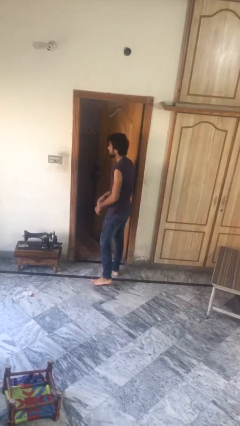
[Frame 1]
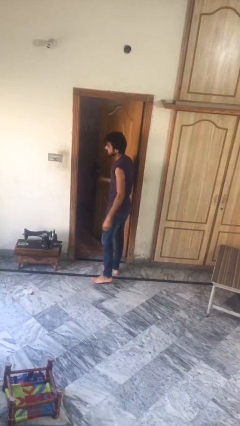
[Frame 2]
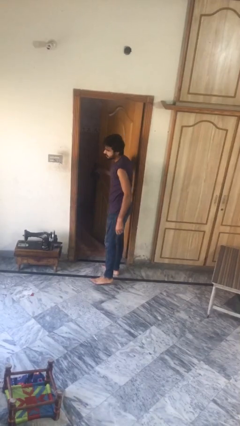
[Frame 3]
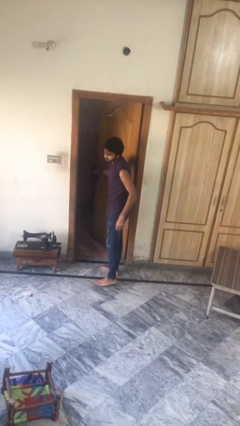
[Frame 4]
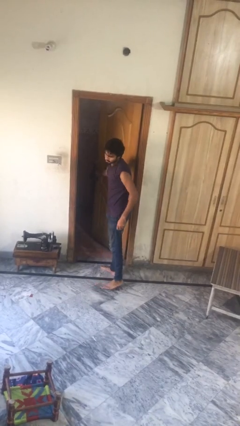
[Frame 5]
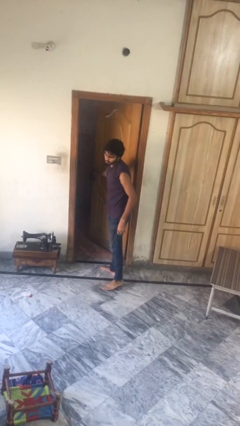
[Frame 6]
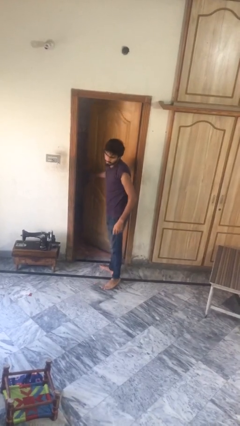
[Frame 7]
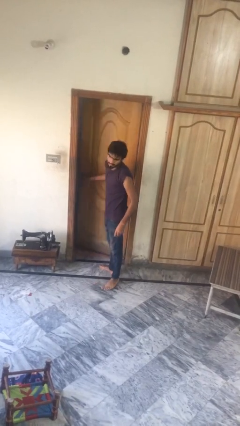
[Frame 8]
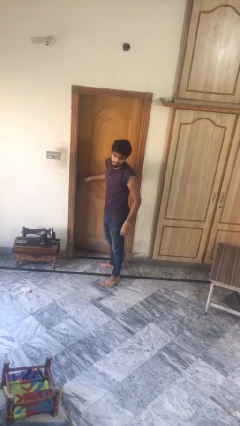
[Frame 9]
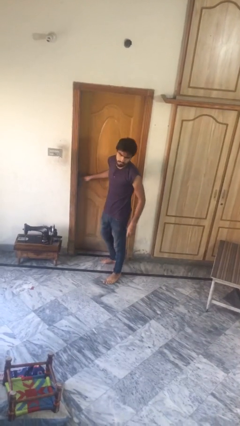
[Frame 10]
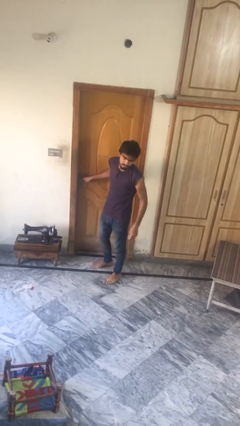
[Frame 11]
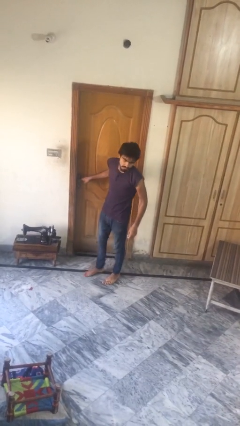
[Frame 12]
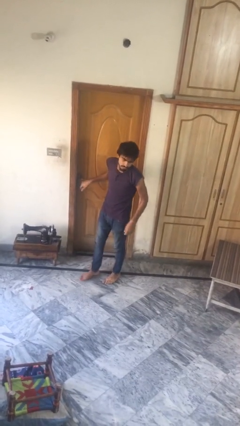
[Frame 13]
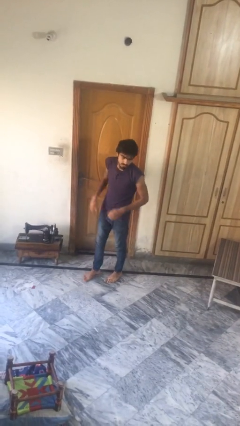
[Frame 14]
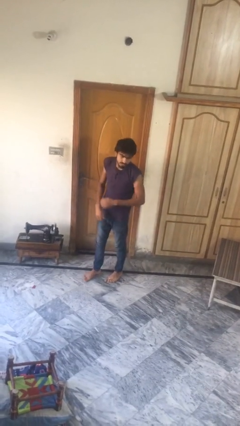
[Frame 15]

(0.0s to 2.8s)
person closes facility door

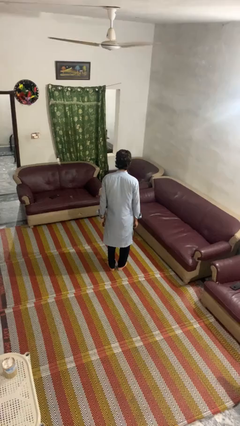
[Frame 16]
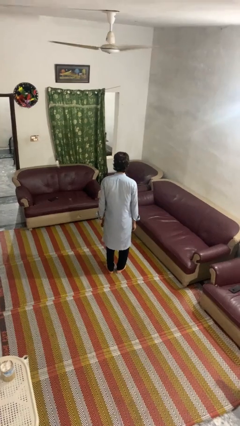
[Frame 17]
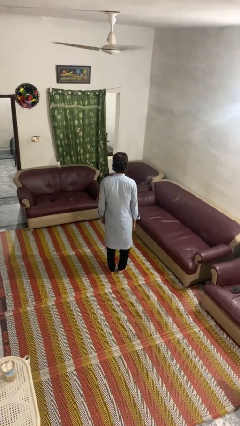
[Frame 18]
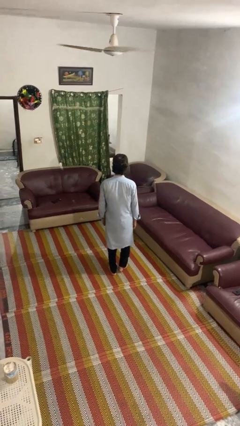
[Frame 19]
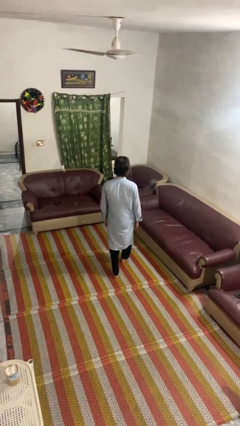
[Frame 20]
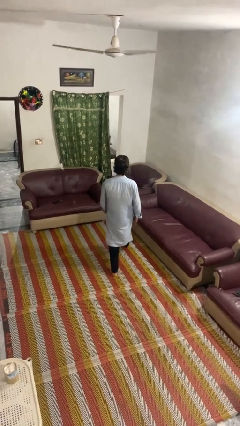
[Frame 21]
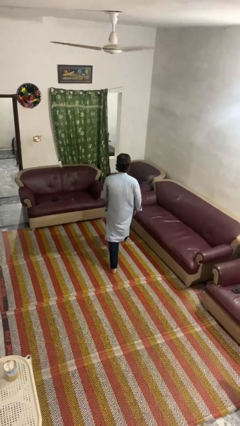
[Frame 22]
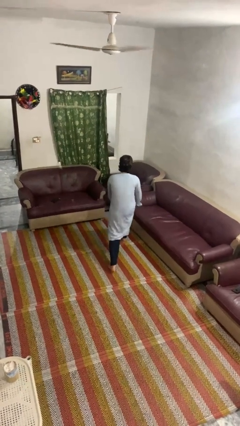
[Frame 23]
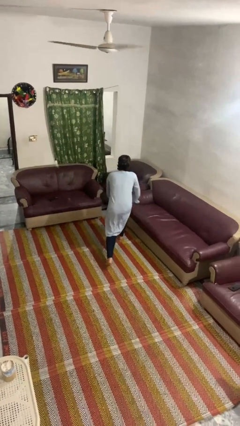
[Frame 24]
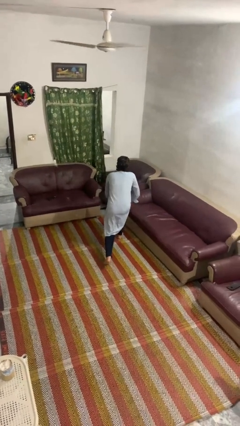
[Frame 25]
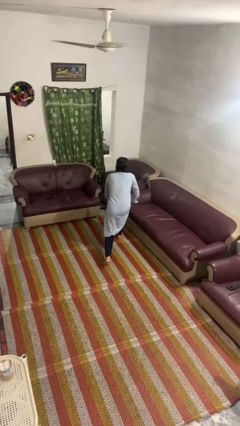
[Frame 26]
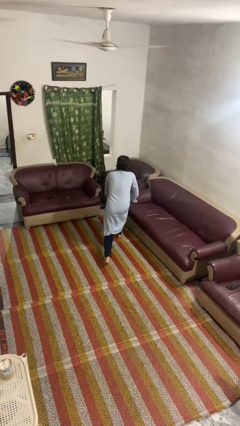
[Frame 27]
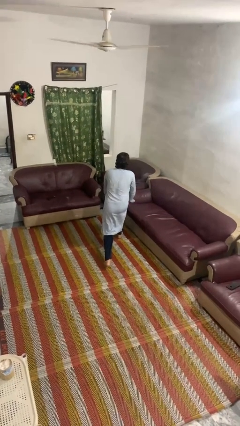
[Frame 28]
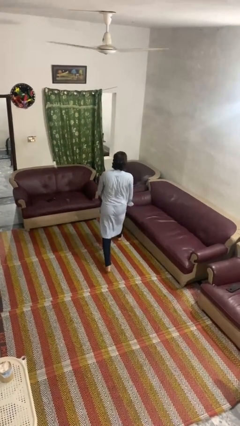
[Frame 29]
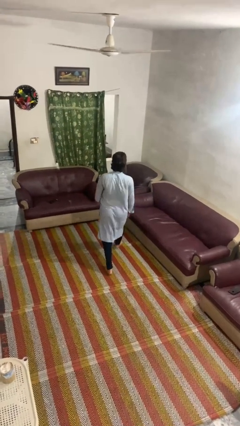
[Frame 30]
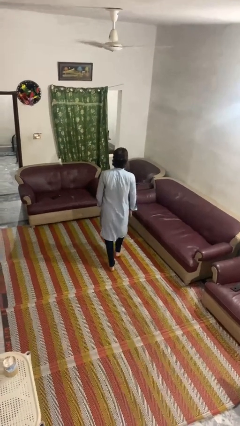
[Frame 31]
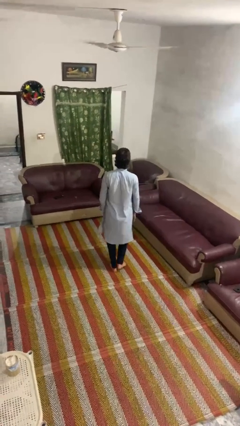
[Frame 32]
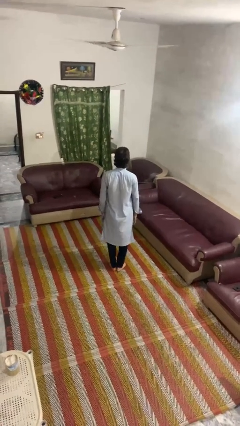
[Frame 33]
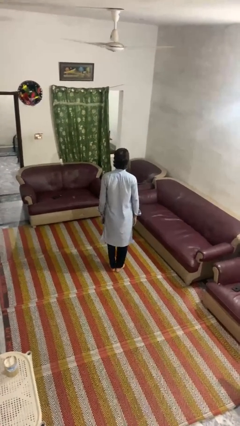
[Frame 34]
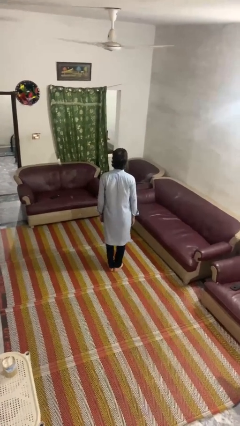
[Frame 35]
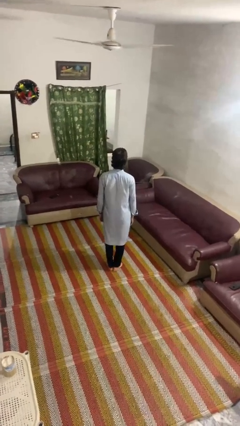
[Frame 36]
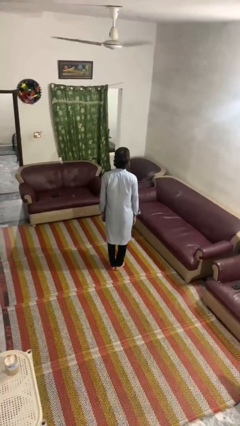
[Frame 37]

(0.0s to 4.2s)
person exercises with lunges

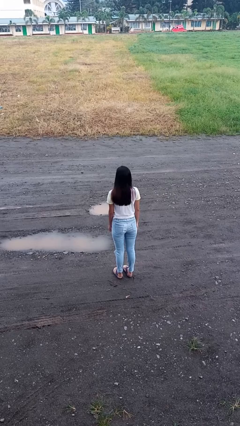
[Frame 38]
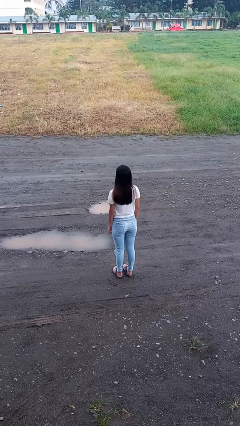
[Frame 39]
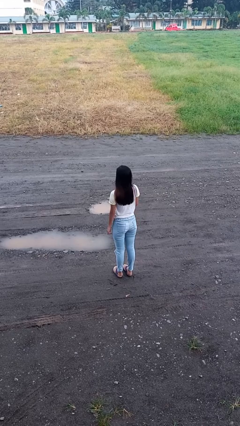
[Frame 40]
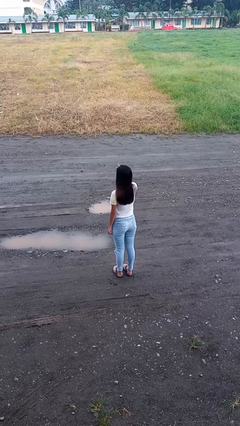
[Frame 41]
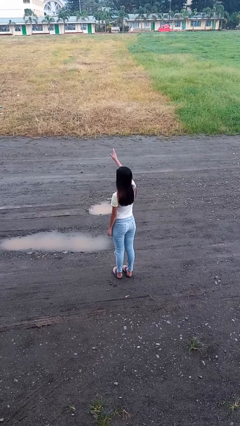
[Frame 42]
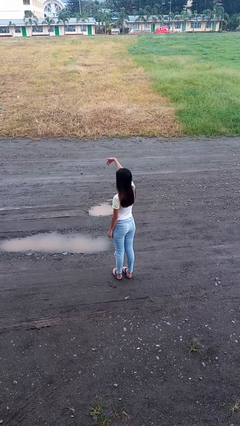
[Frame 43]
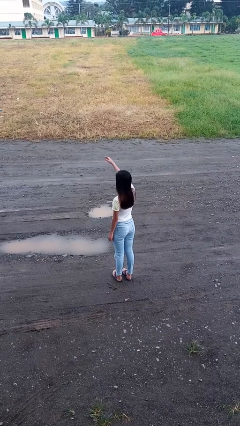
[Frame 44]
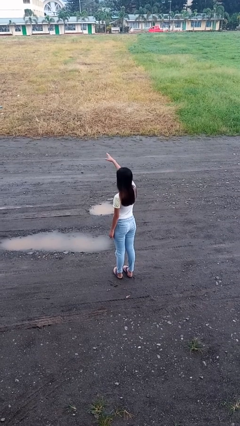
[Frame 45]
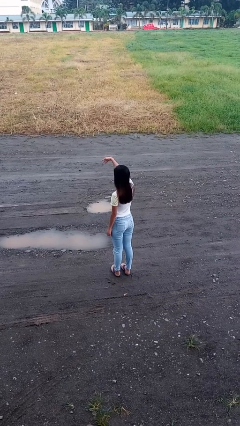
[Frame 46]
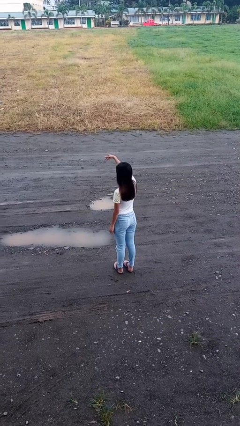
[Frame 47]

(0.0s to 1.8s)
person gestures come here

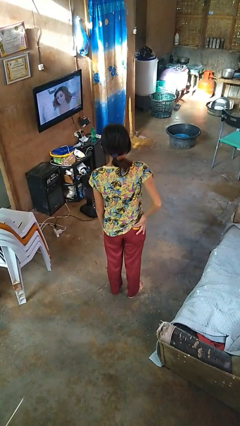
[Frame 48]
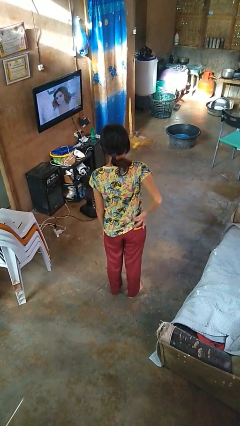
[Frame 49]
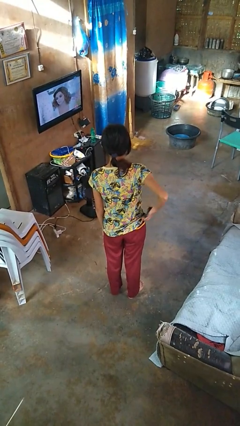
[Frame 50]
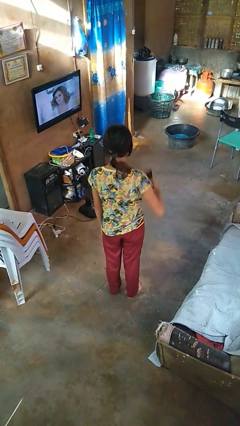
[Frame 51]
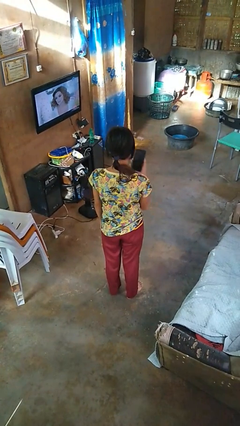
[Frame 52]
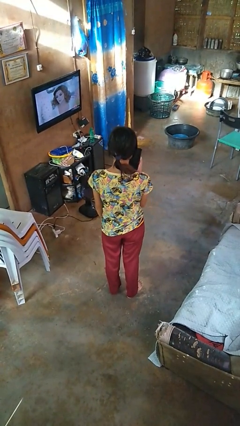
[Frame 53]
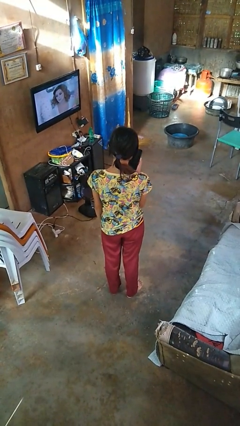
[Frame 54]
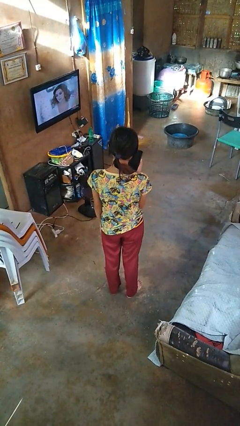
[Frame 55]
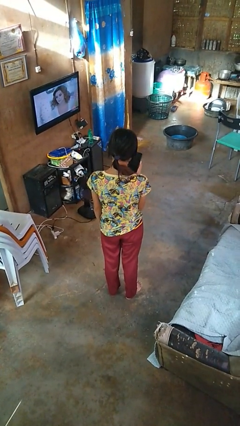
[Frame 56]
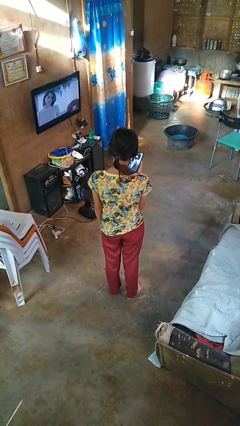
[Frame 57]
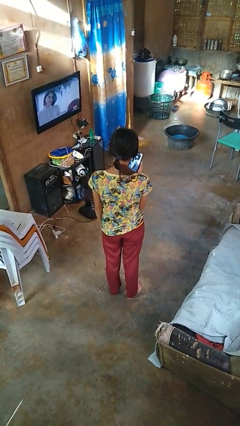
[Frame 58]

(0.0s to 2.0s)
person takes phone from pocket

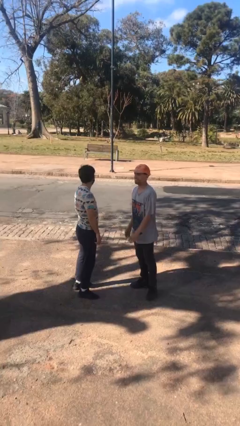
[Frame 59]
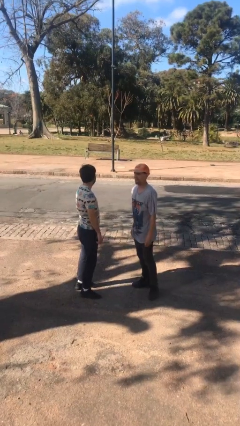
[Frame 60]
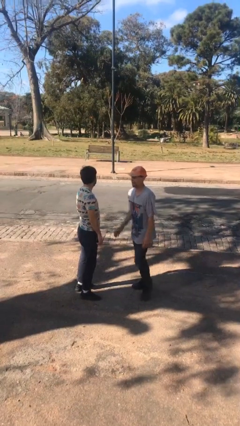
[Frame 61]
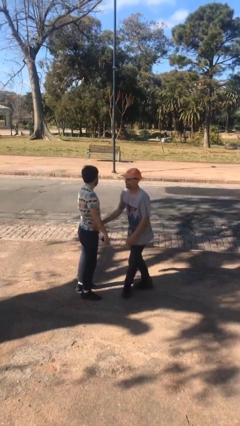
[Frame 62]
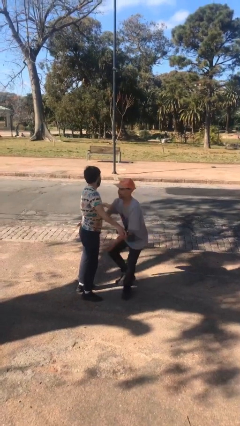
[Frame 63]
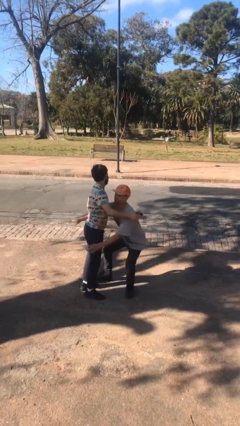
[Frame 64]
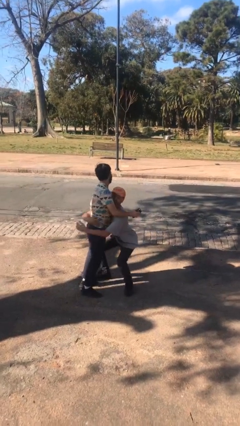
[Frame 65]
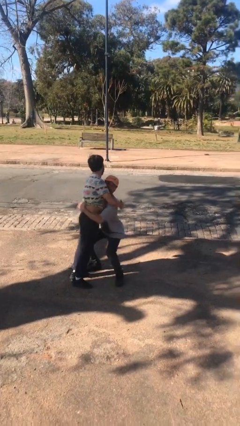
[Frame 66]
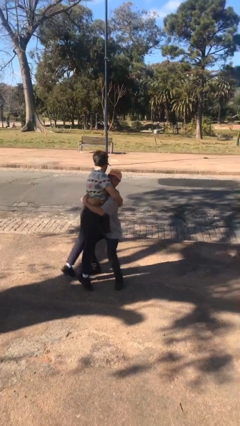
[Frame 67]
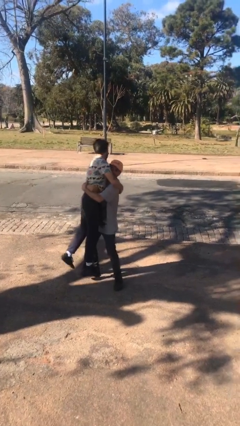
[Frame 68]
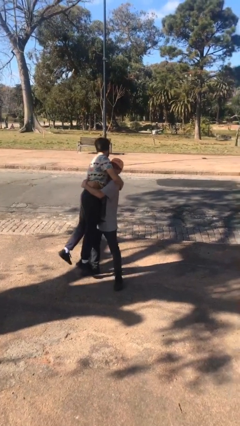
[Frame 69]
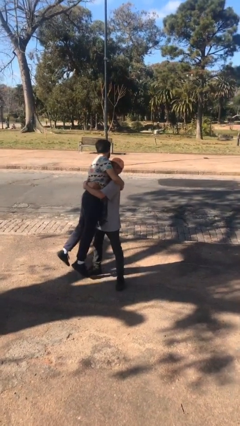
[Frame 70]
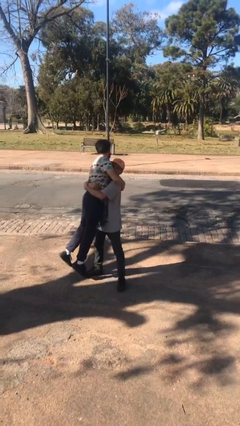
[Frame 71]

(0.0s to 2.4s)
person picks up person

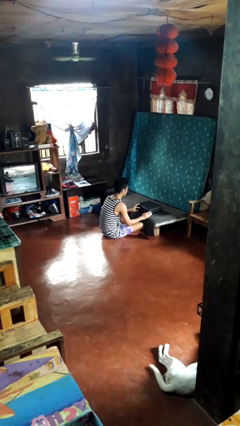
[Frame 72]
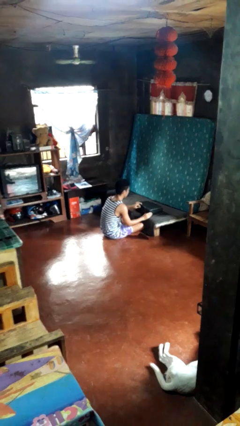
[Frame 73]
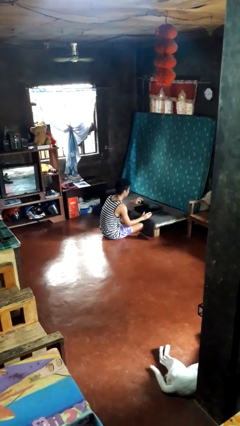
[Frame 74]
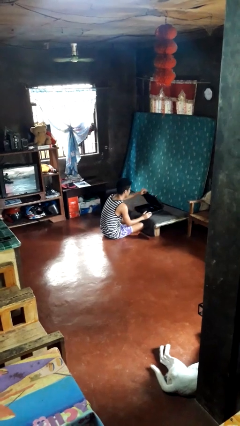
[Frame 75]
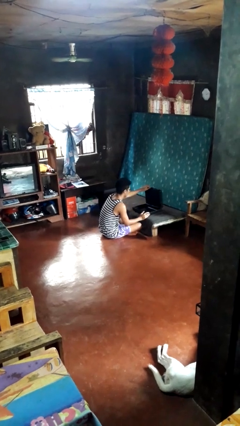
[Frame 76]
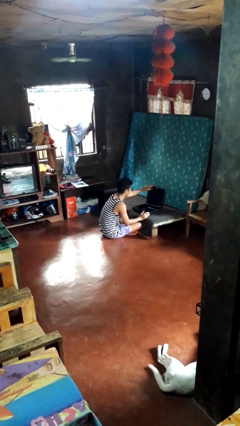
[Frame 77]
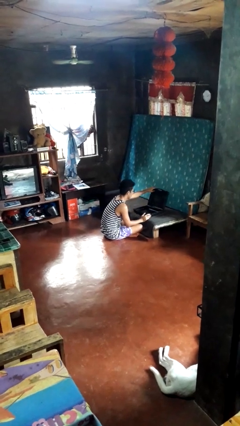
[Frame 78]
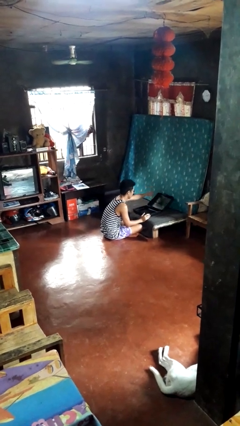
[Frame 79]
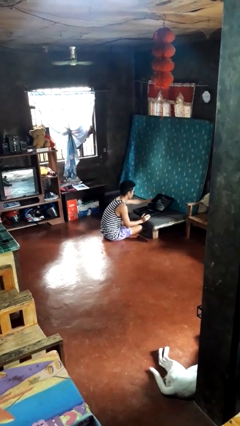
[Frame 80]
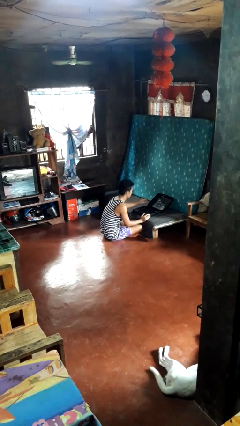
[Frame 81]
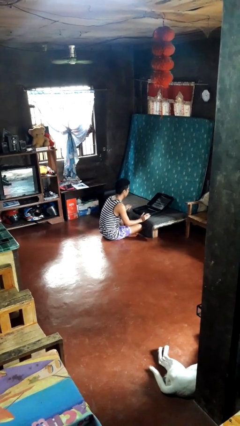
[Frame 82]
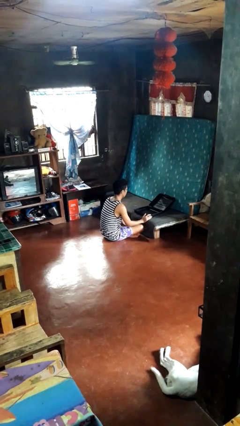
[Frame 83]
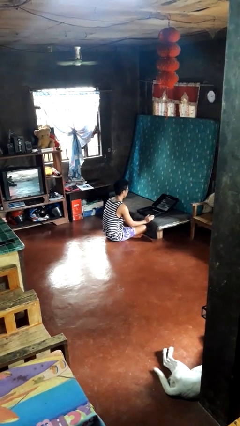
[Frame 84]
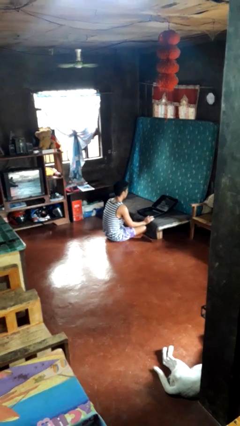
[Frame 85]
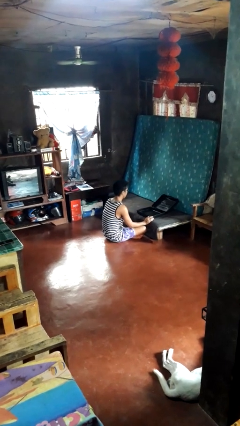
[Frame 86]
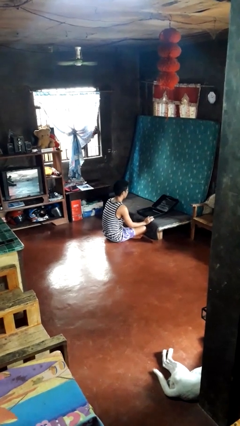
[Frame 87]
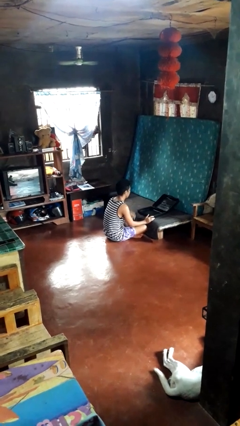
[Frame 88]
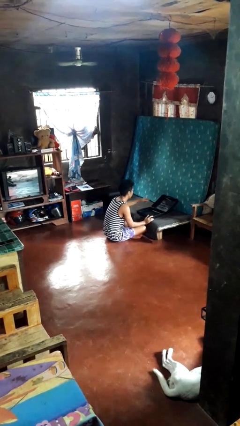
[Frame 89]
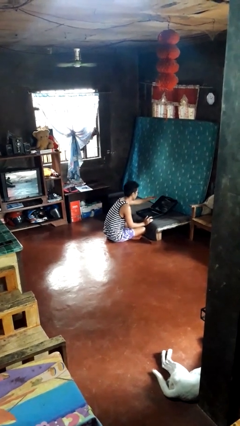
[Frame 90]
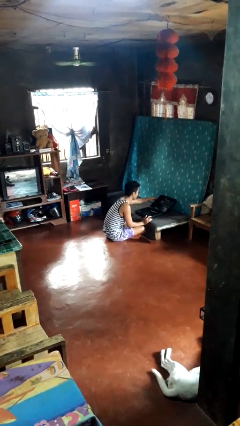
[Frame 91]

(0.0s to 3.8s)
person opens suitcase

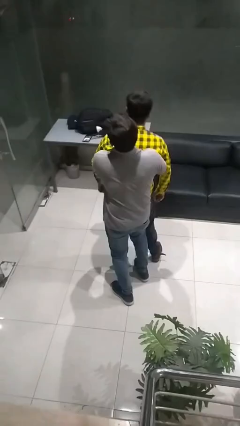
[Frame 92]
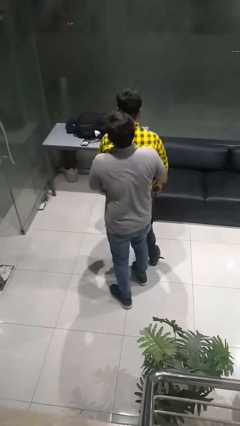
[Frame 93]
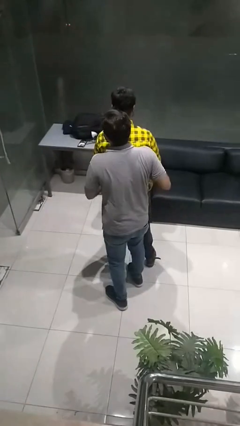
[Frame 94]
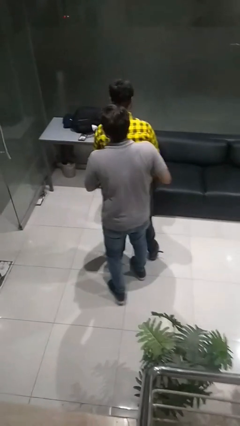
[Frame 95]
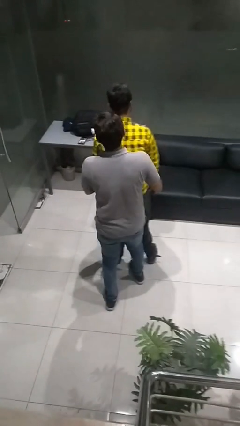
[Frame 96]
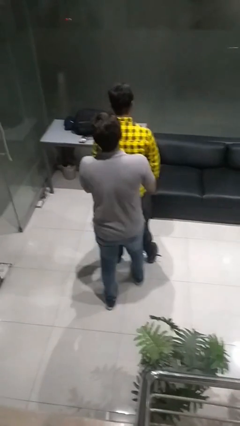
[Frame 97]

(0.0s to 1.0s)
person puts down person
